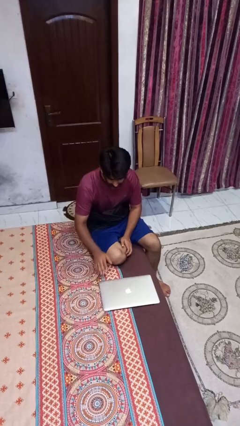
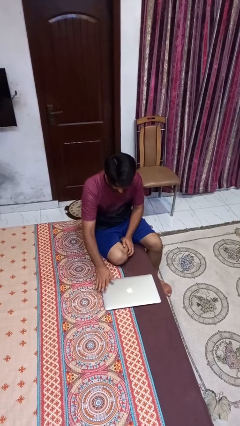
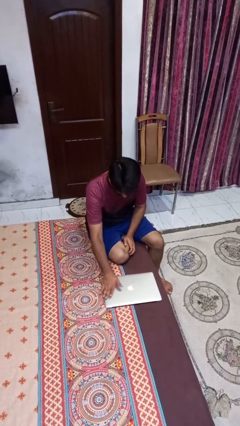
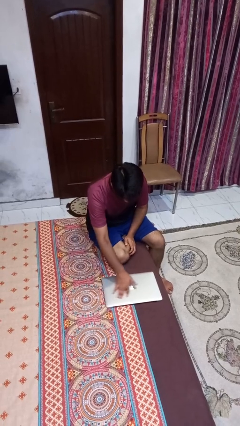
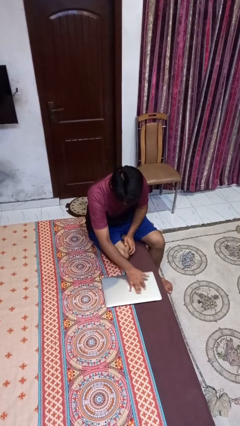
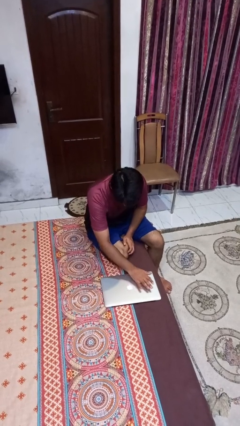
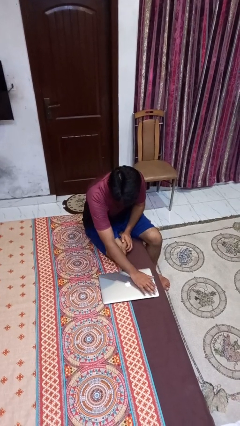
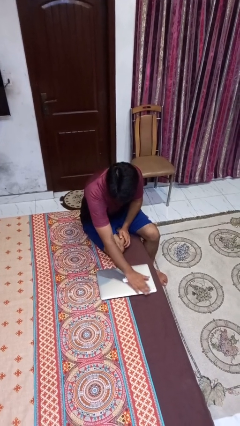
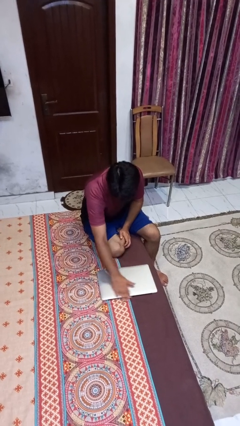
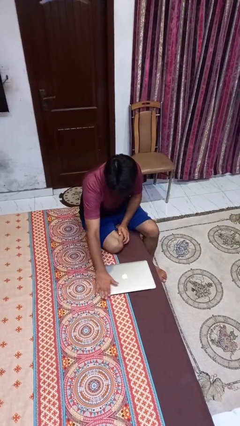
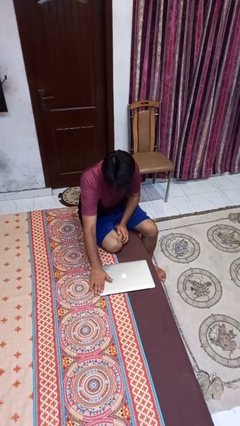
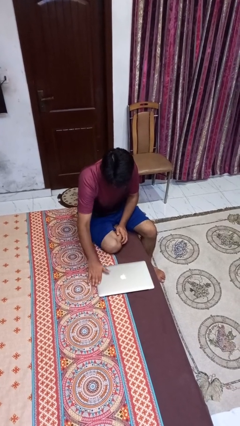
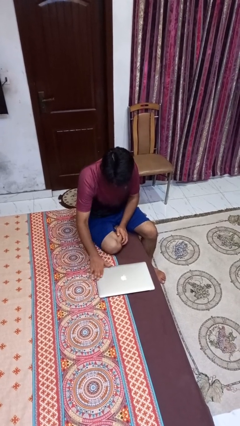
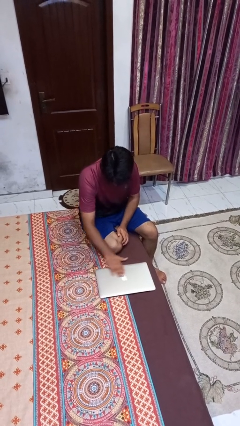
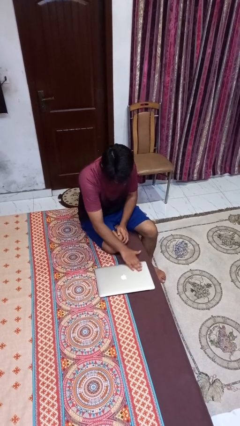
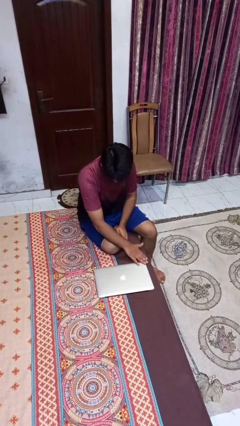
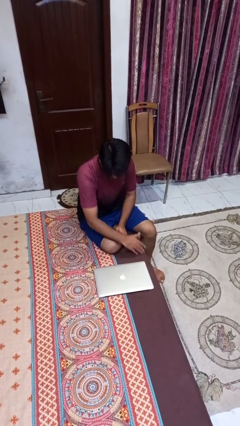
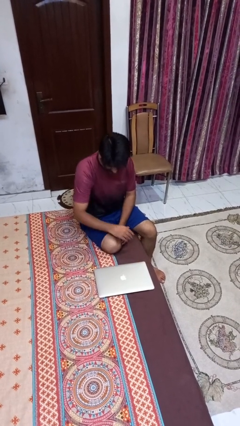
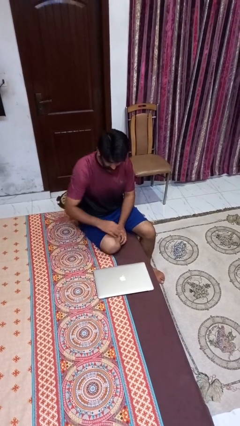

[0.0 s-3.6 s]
person waves hand over object

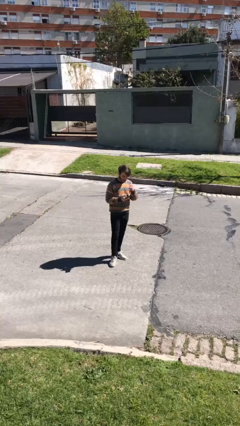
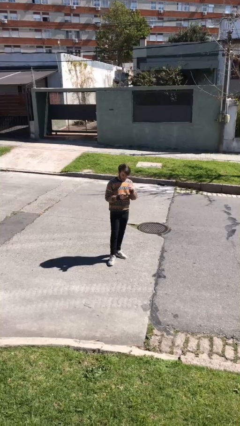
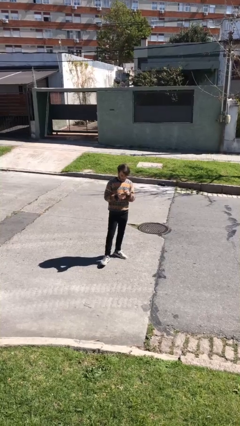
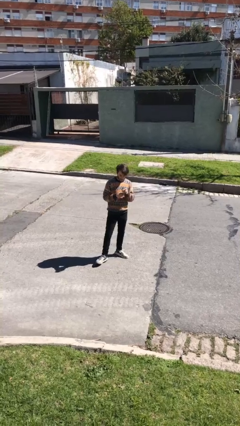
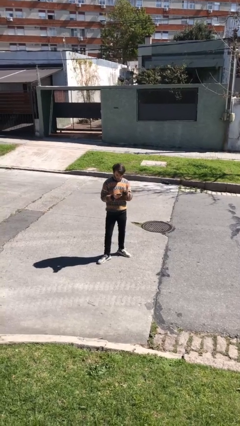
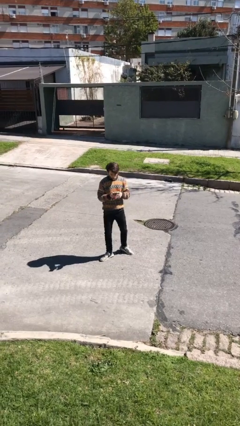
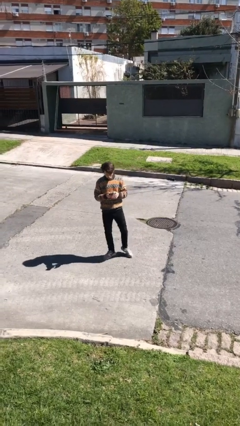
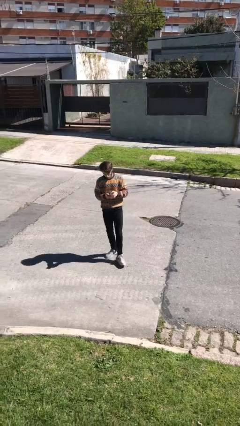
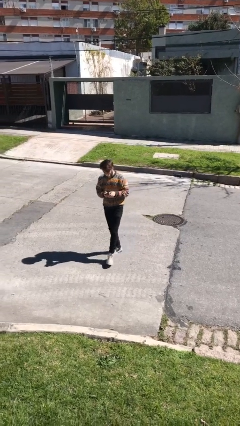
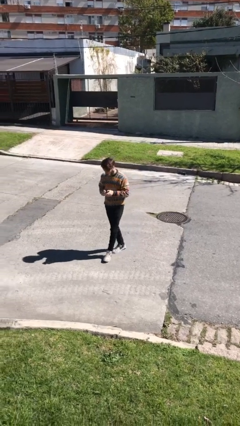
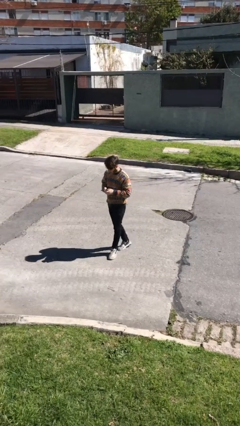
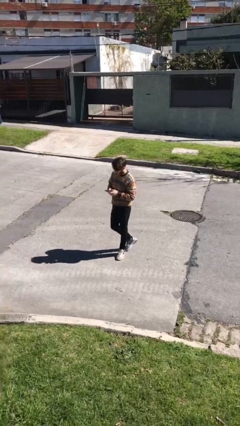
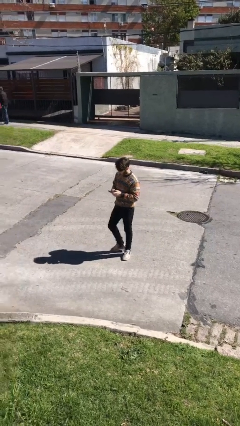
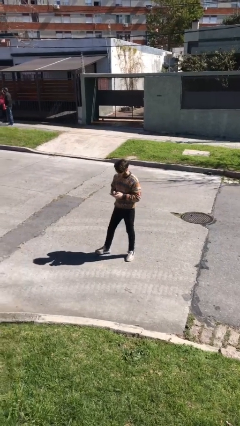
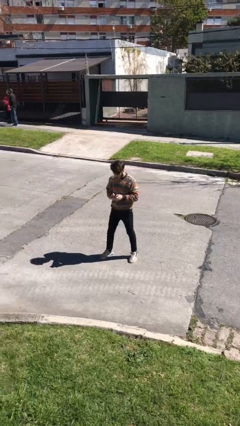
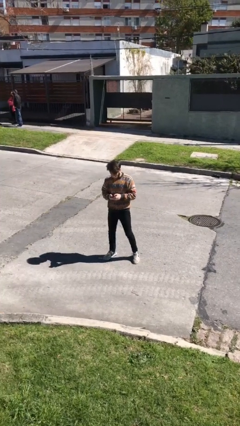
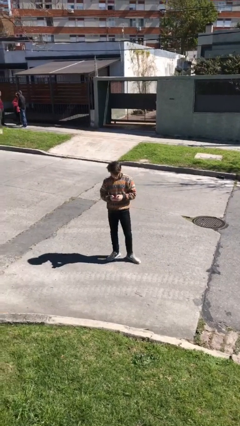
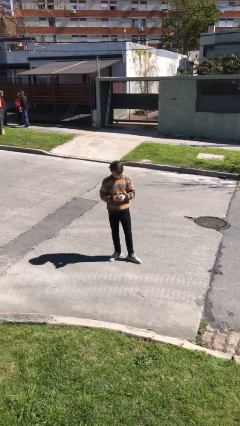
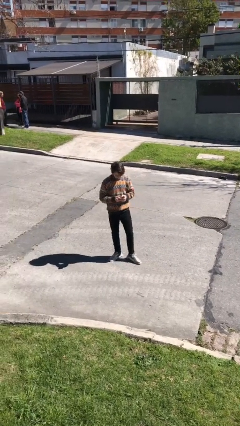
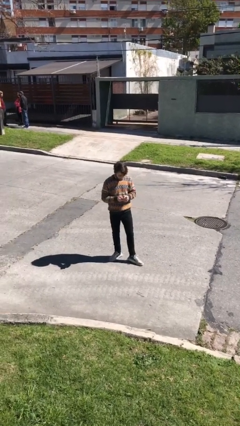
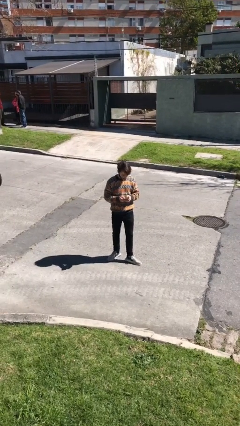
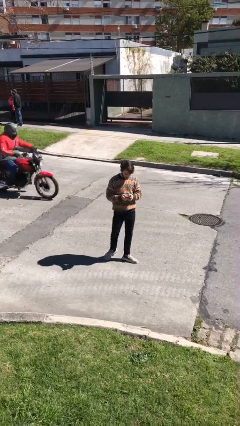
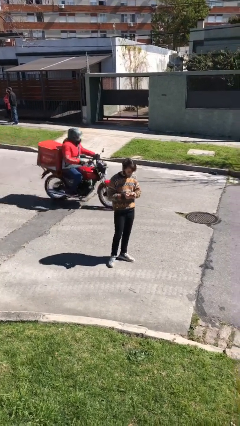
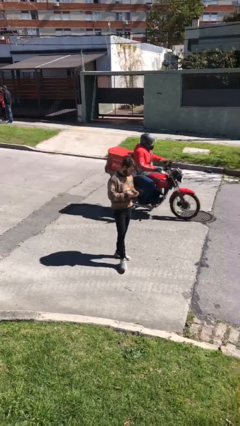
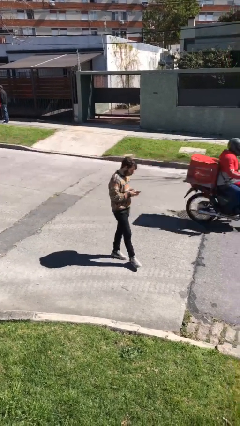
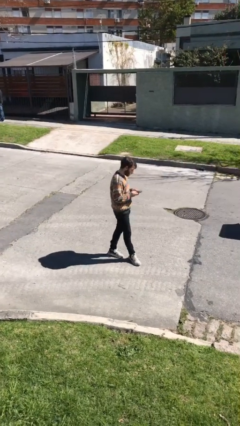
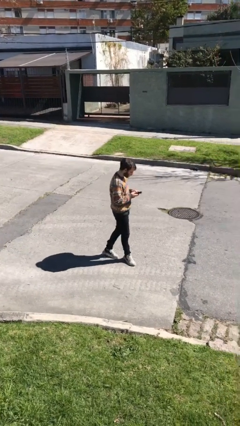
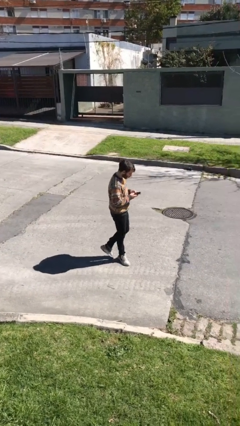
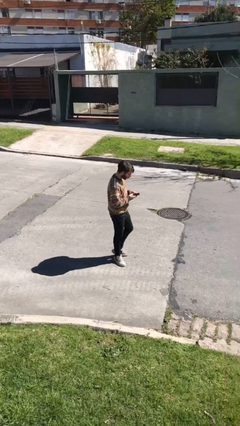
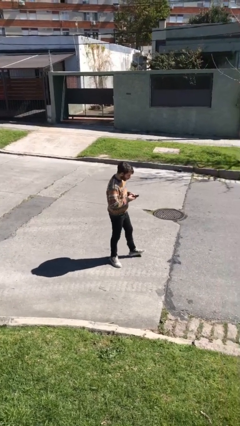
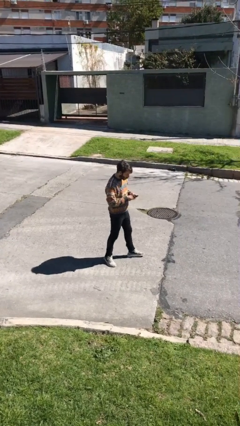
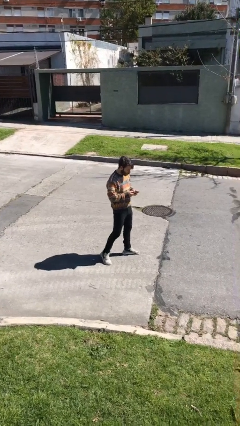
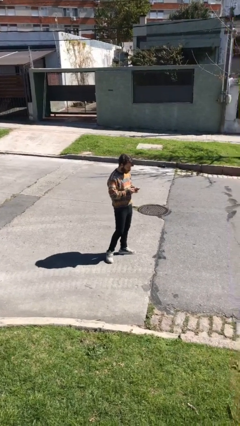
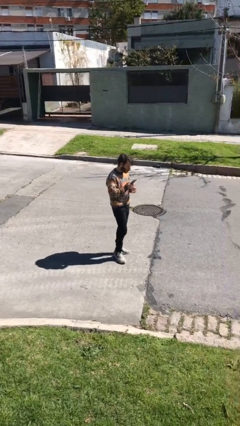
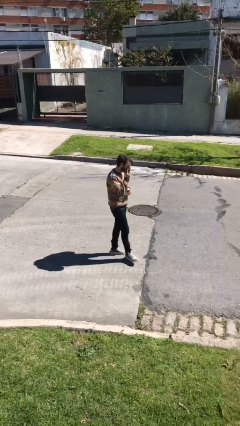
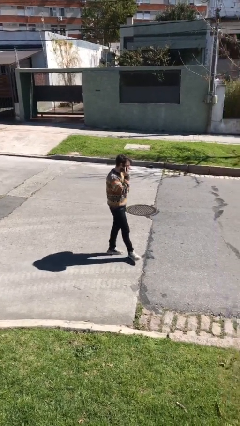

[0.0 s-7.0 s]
person texts on phone

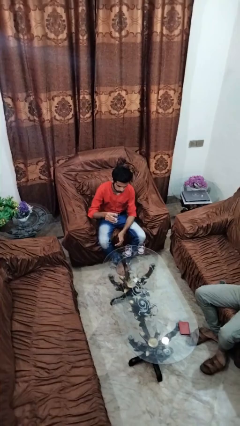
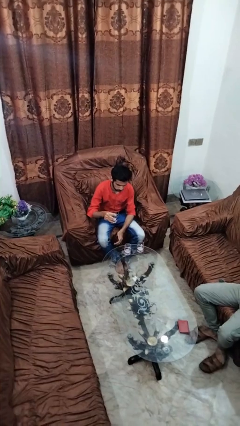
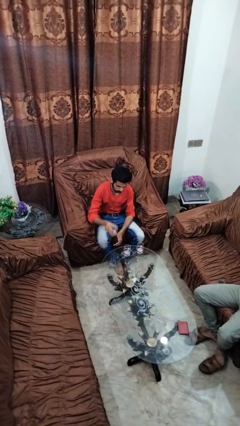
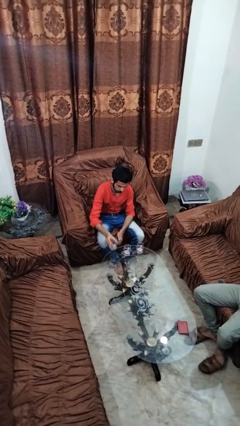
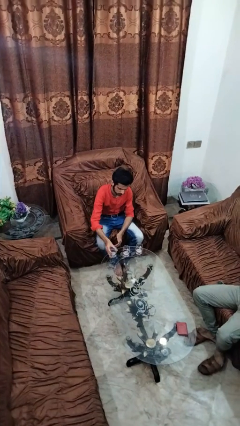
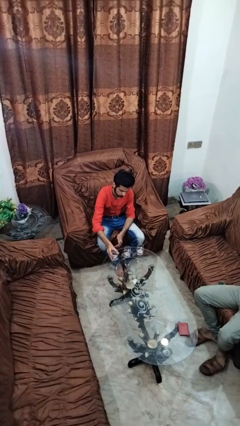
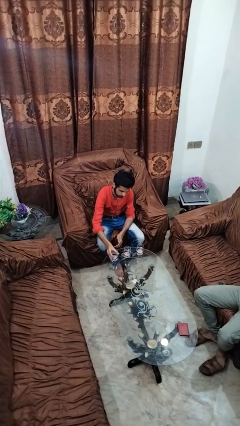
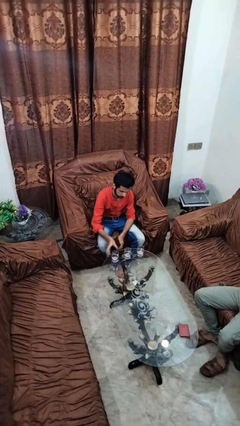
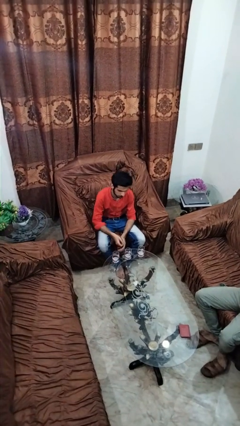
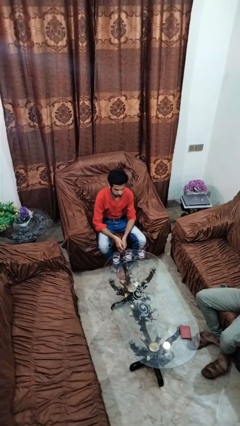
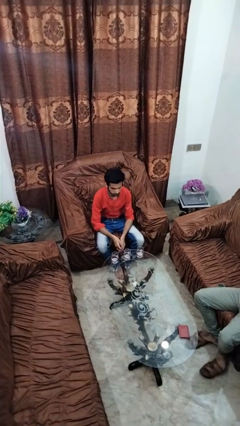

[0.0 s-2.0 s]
person puts down object on table

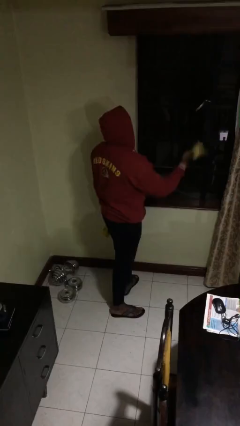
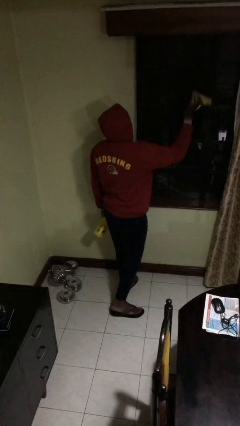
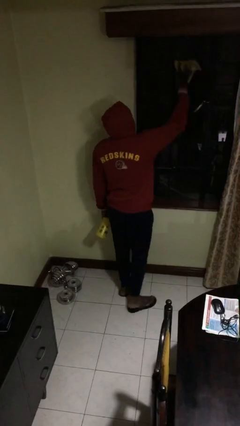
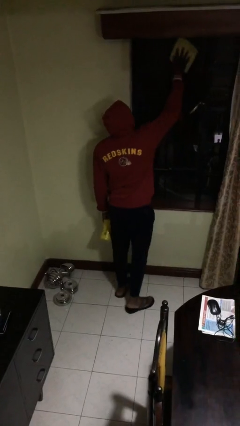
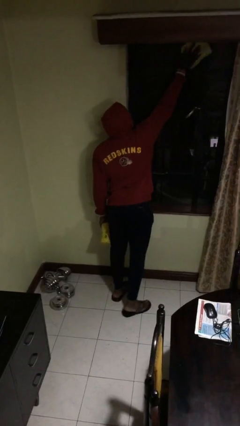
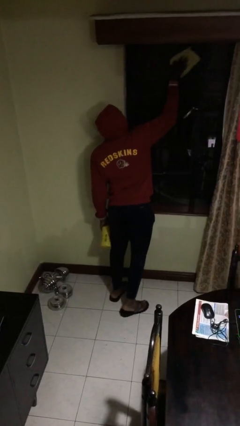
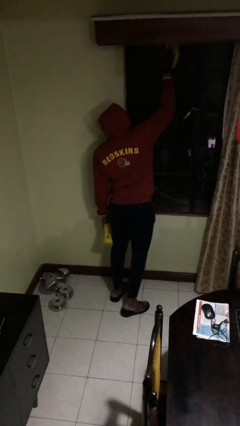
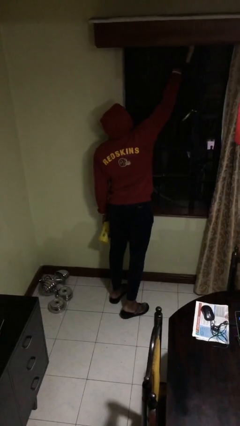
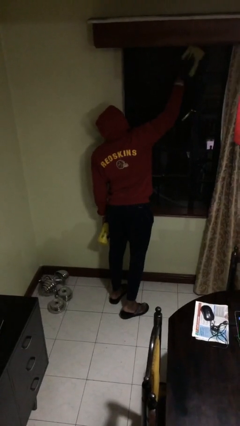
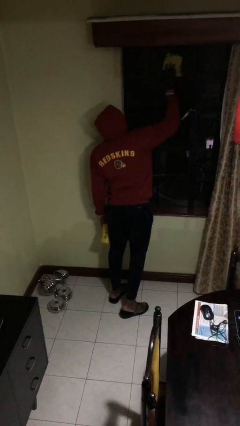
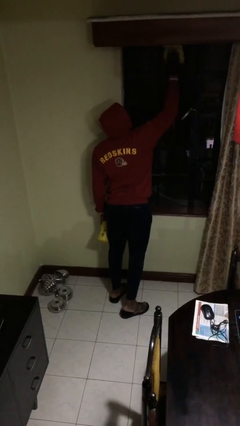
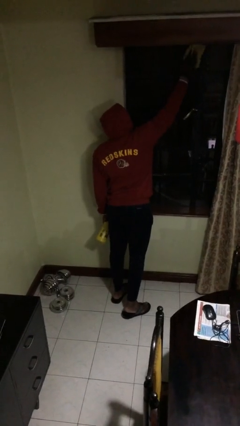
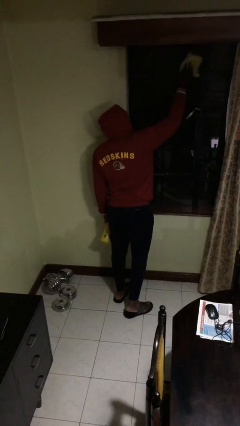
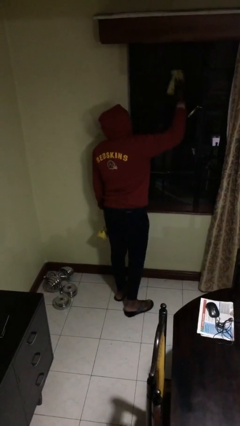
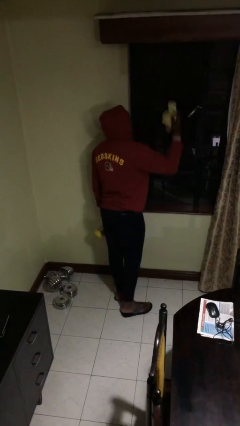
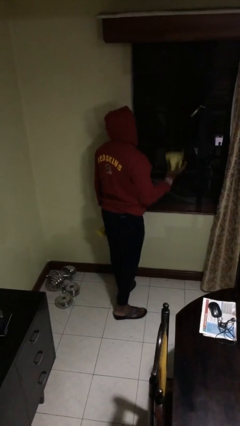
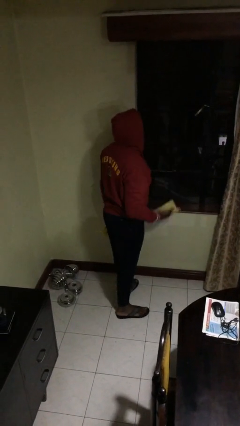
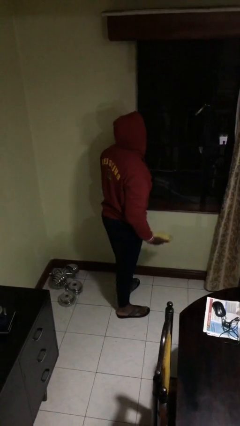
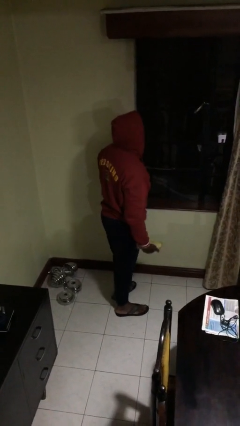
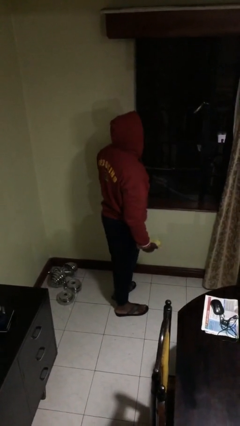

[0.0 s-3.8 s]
person washes window

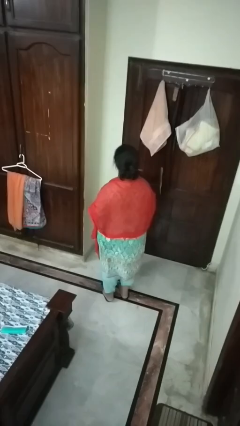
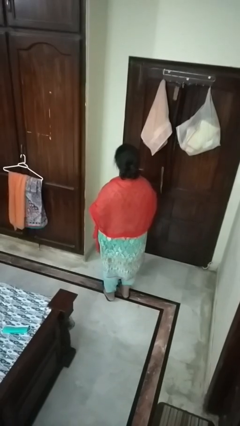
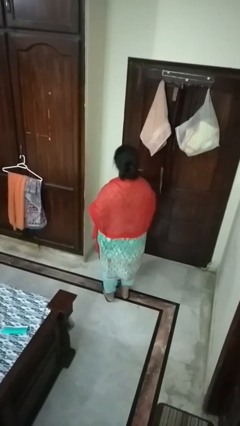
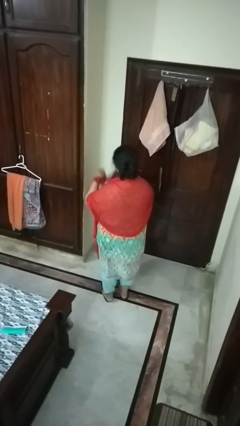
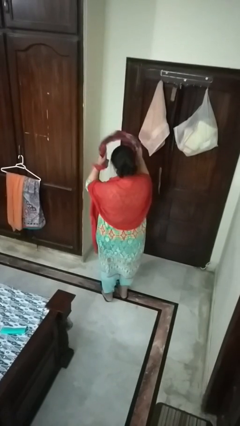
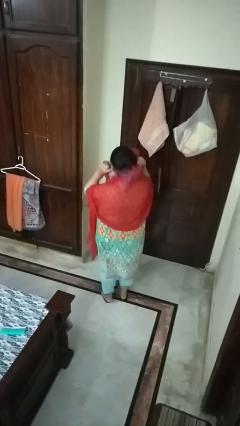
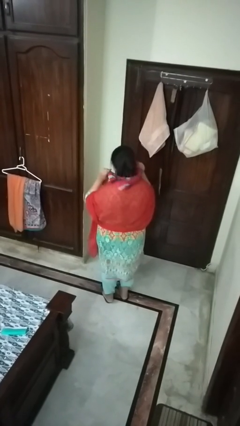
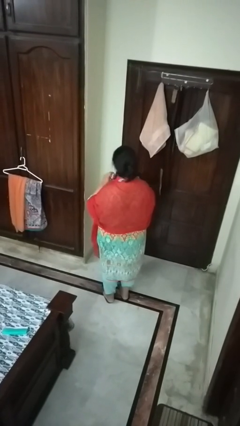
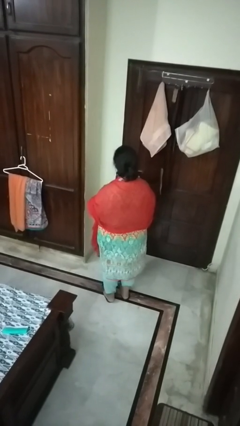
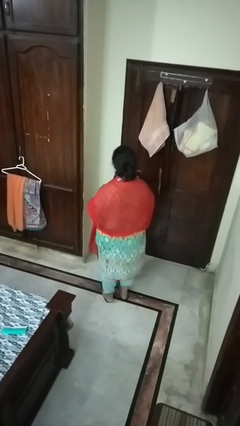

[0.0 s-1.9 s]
person puts on scarf
